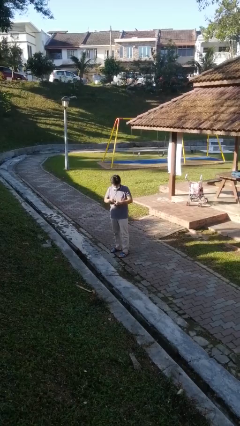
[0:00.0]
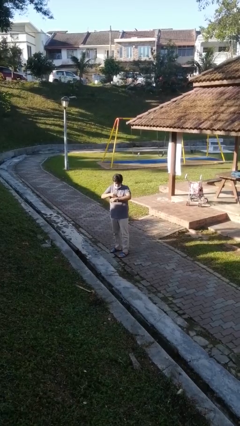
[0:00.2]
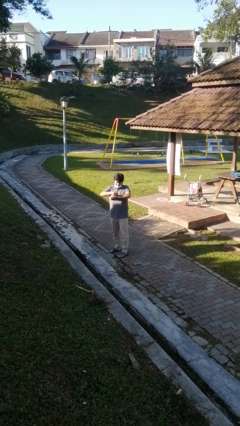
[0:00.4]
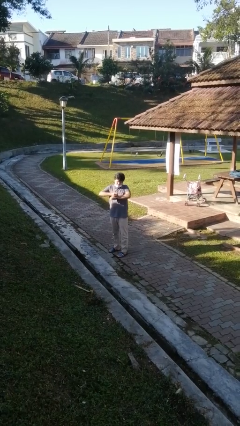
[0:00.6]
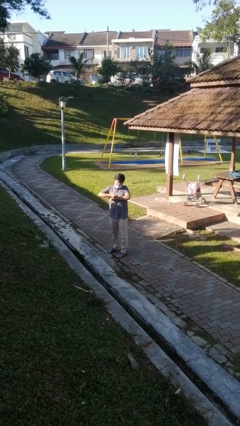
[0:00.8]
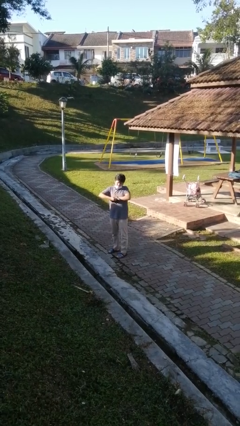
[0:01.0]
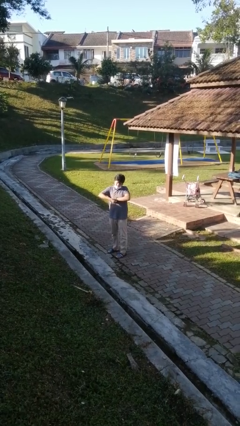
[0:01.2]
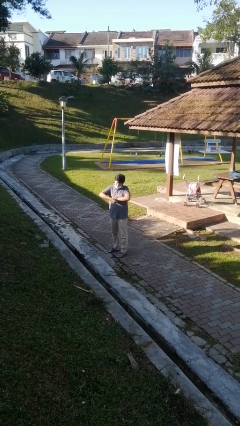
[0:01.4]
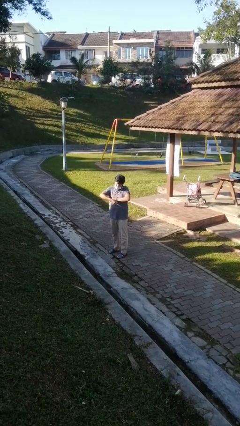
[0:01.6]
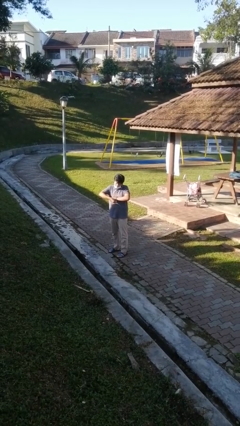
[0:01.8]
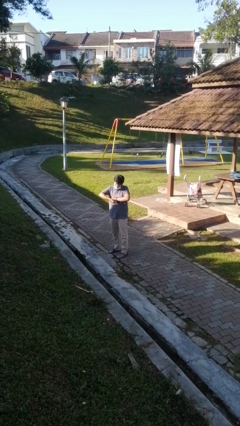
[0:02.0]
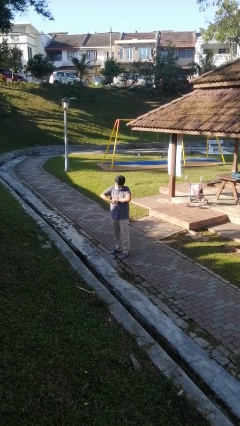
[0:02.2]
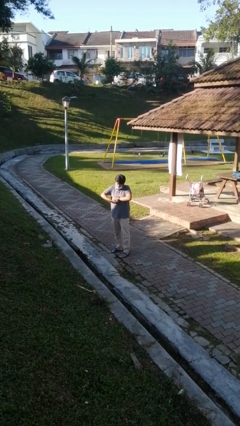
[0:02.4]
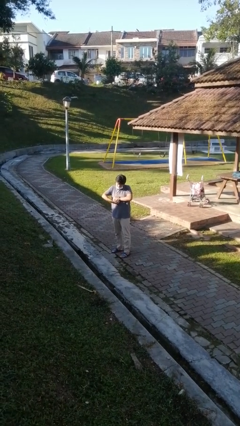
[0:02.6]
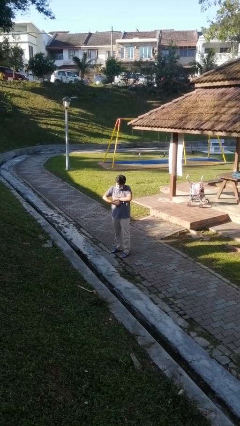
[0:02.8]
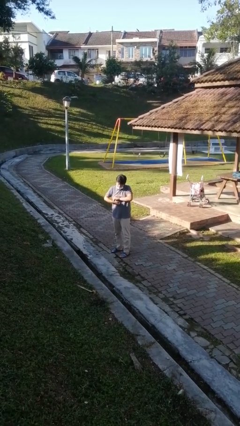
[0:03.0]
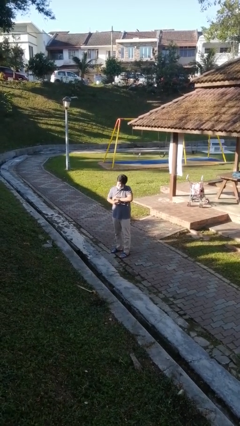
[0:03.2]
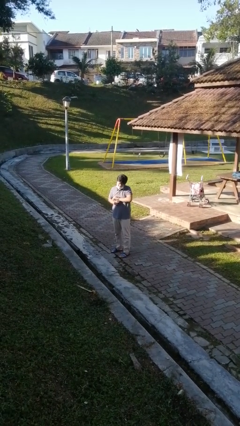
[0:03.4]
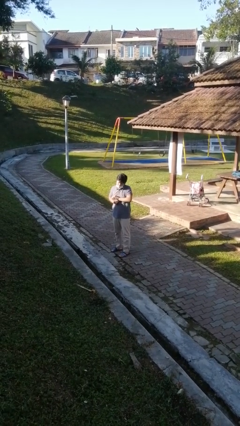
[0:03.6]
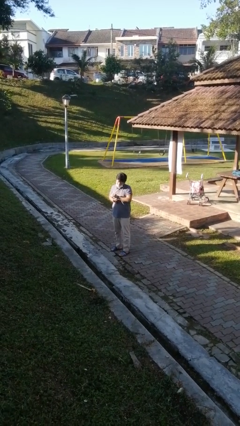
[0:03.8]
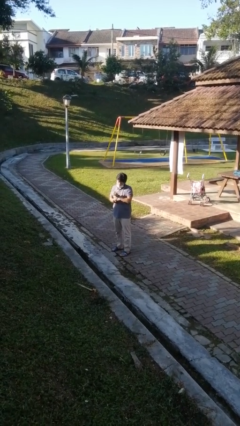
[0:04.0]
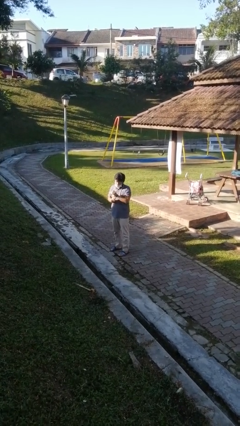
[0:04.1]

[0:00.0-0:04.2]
person puts on wristwatch

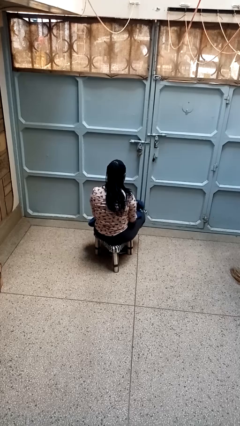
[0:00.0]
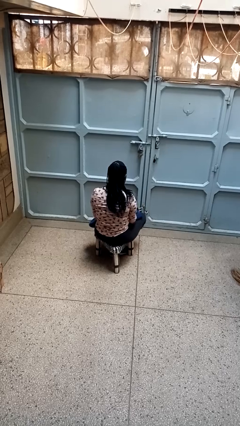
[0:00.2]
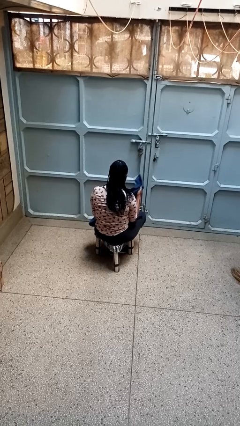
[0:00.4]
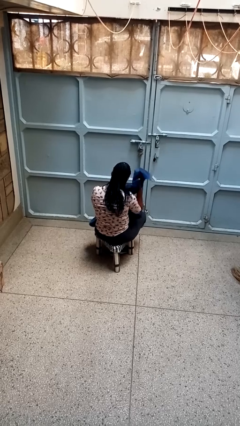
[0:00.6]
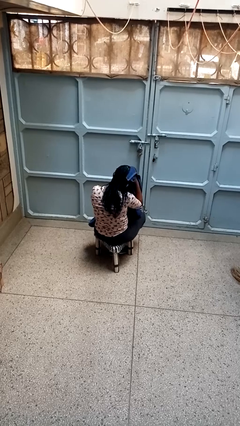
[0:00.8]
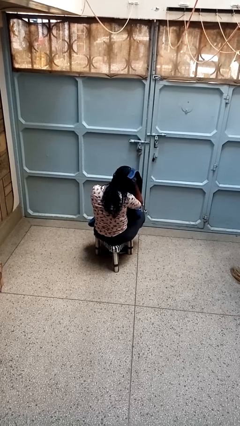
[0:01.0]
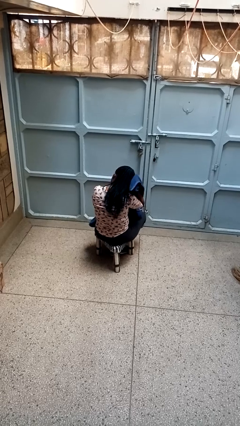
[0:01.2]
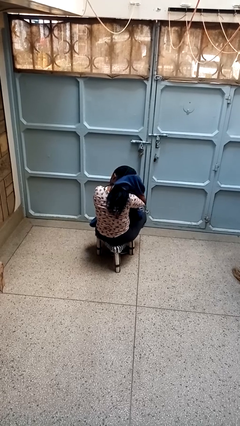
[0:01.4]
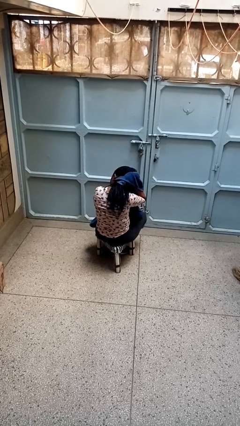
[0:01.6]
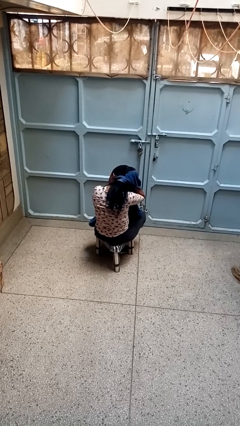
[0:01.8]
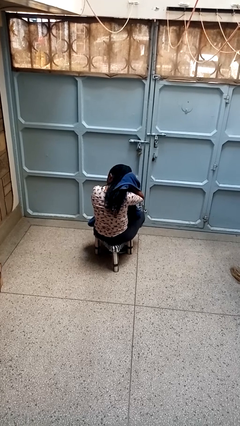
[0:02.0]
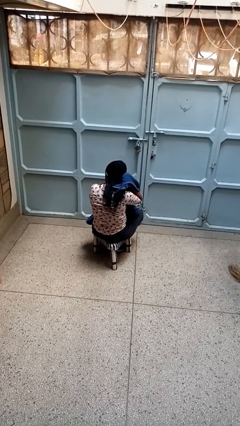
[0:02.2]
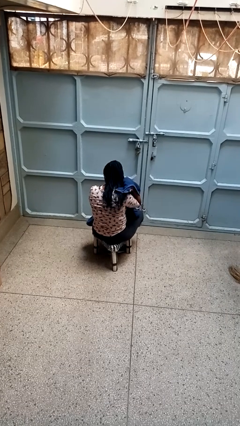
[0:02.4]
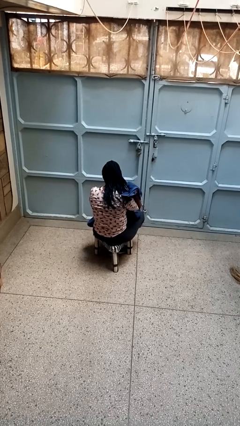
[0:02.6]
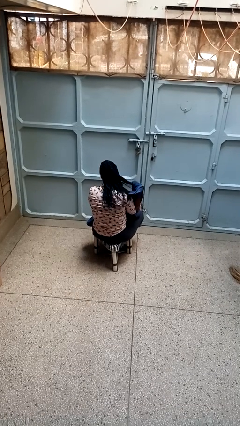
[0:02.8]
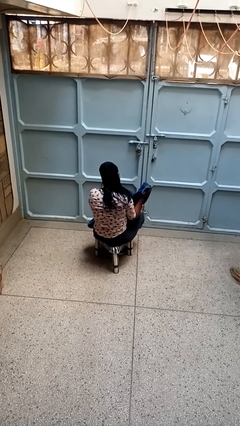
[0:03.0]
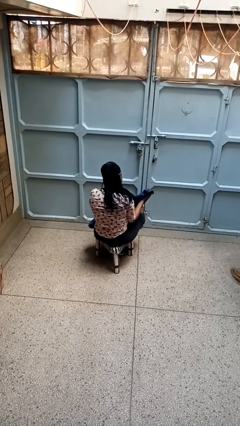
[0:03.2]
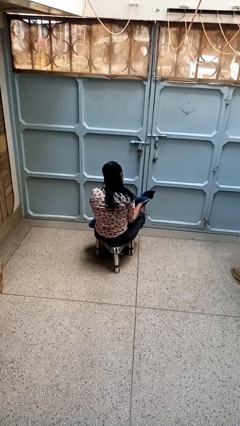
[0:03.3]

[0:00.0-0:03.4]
person dries hair with towel

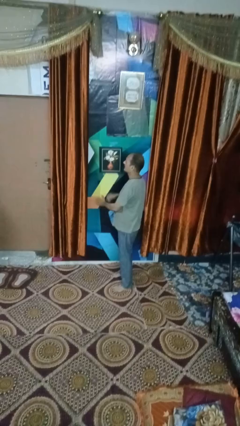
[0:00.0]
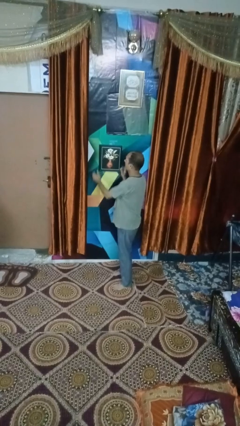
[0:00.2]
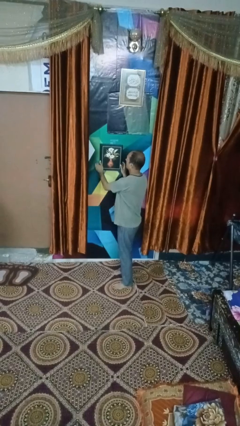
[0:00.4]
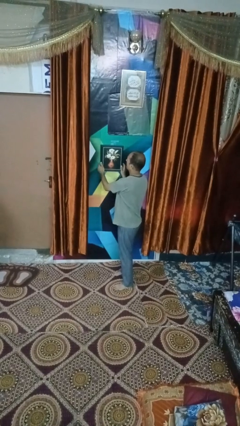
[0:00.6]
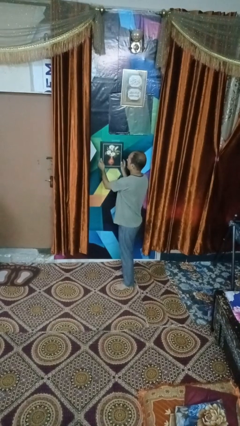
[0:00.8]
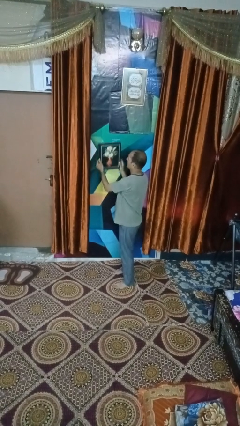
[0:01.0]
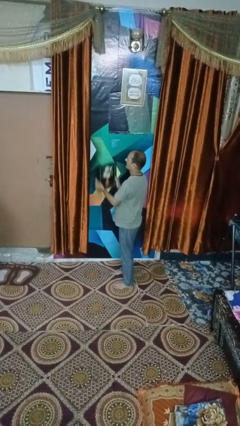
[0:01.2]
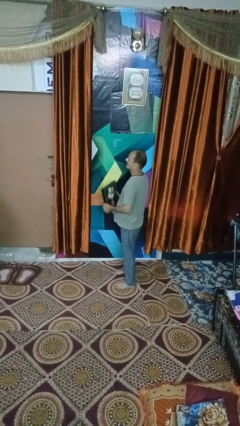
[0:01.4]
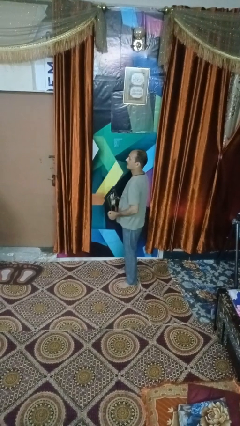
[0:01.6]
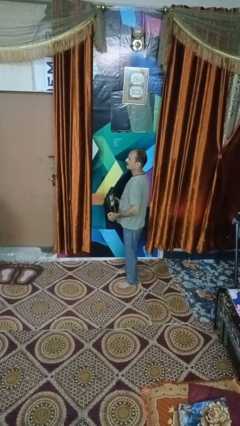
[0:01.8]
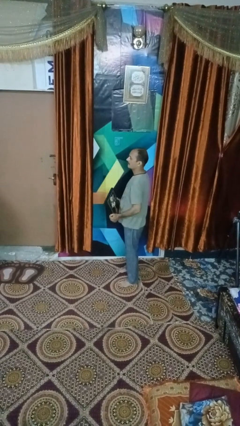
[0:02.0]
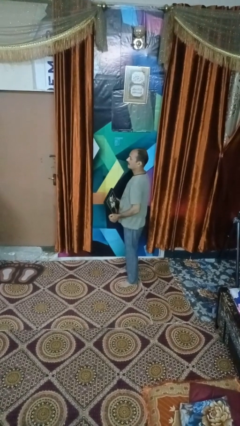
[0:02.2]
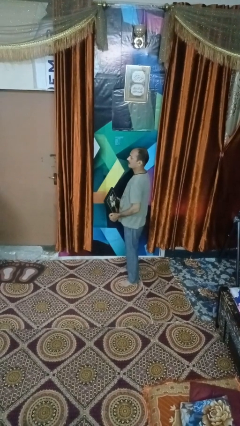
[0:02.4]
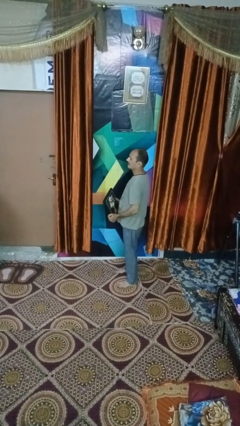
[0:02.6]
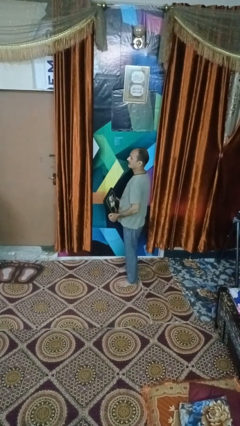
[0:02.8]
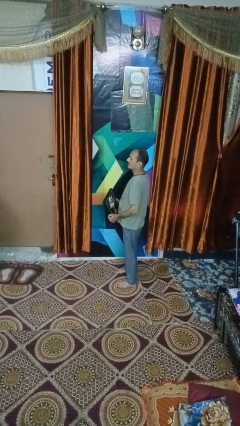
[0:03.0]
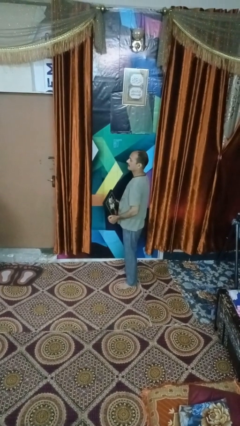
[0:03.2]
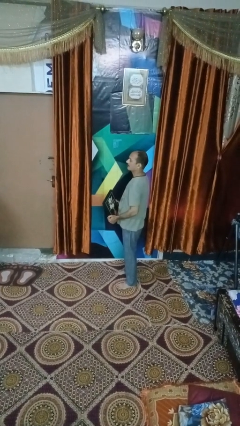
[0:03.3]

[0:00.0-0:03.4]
person takes down picture frame

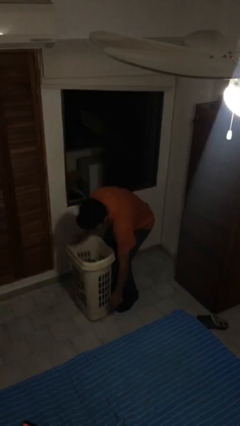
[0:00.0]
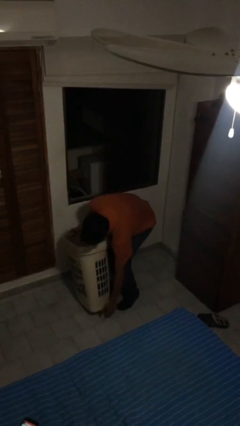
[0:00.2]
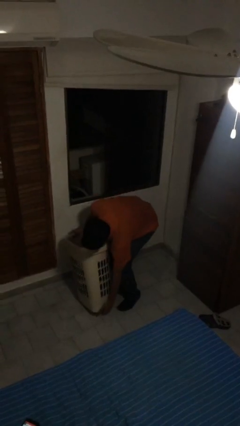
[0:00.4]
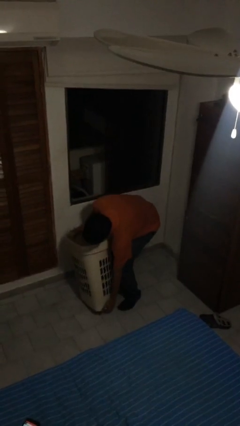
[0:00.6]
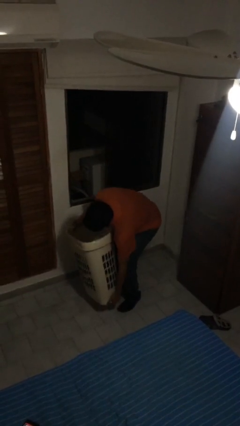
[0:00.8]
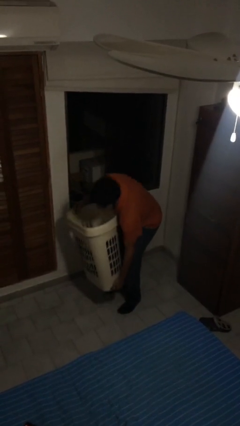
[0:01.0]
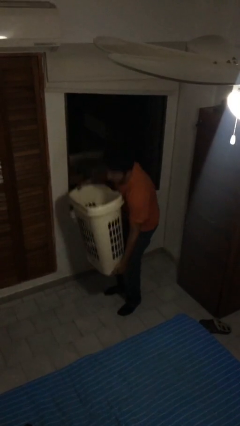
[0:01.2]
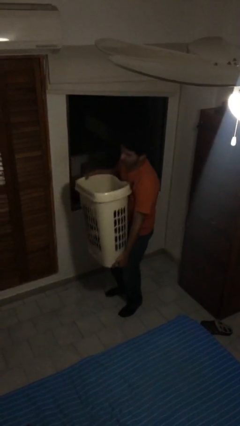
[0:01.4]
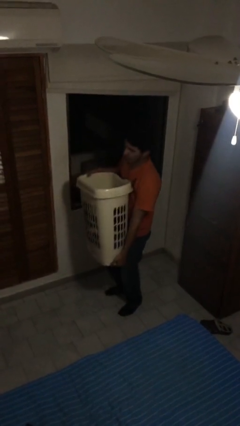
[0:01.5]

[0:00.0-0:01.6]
person picks up object from floor

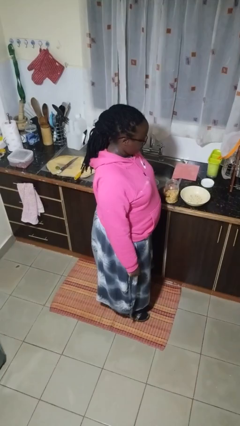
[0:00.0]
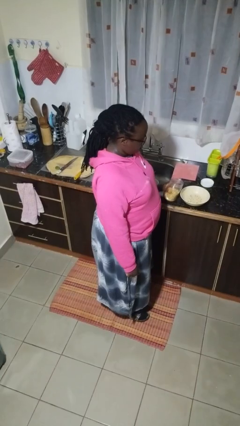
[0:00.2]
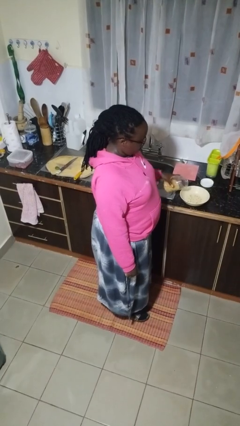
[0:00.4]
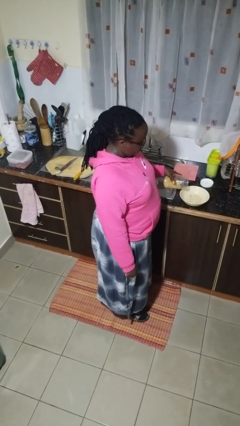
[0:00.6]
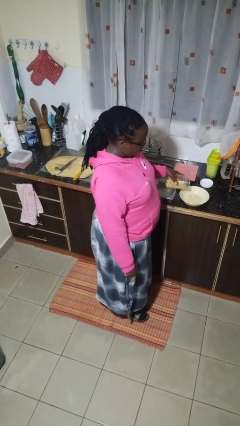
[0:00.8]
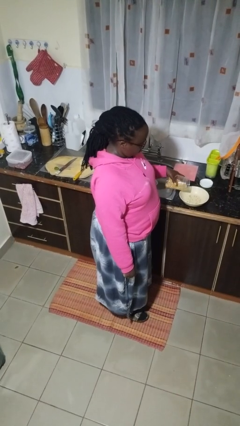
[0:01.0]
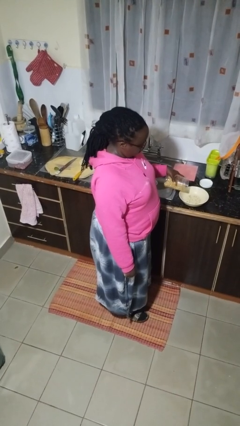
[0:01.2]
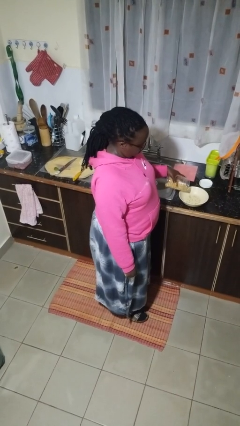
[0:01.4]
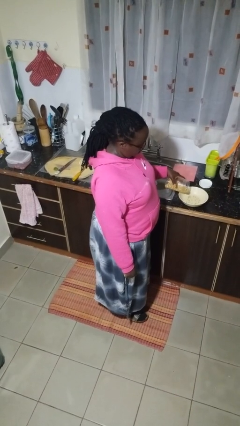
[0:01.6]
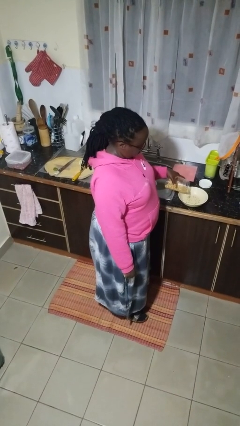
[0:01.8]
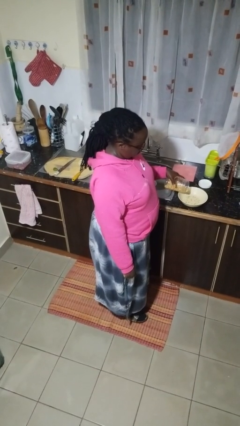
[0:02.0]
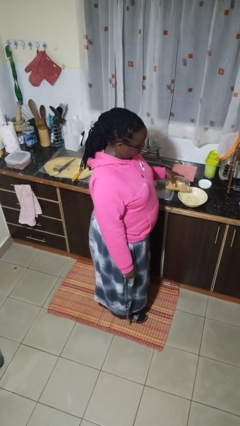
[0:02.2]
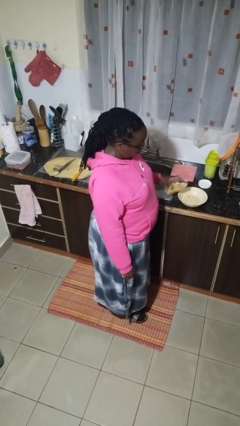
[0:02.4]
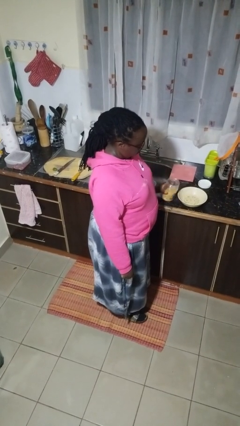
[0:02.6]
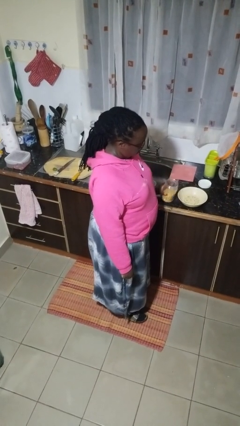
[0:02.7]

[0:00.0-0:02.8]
person pours into bowl

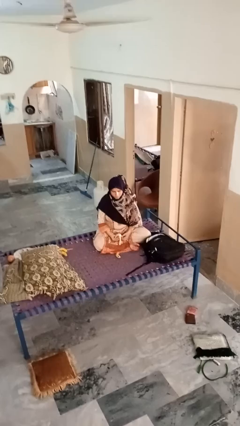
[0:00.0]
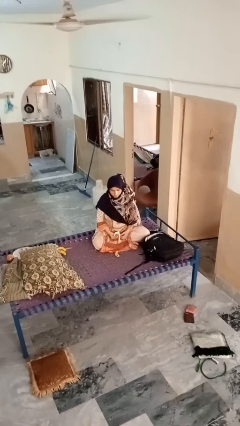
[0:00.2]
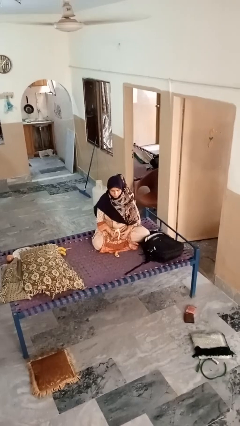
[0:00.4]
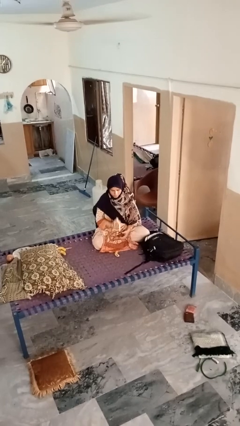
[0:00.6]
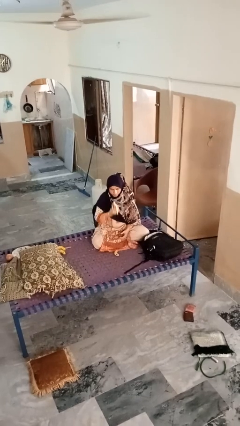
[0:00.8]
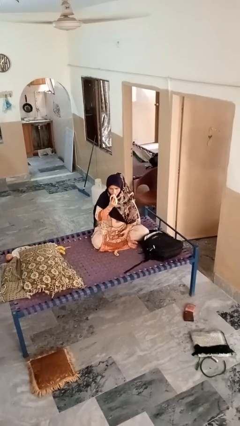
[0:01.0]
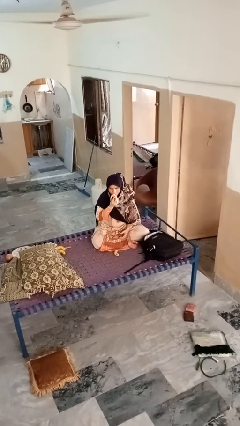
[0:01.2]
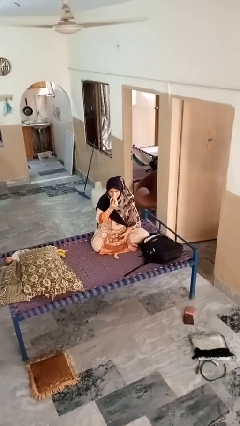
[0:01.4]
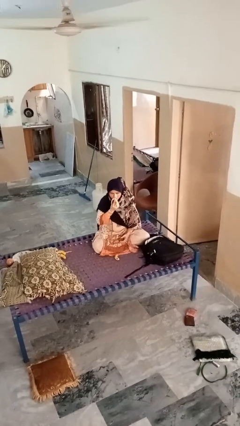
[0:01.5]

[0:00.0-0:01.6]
person eats banana

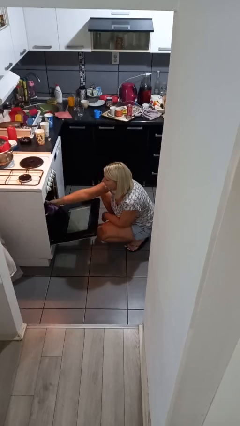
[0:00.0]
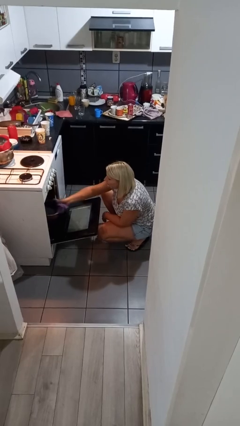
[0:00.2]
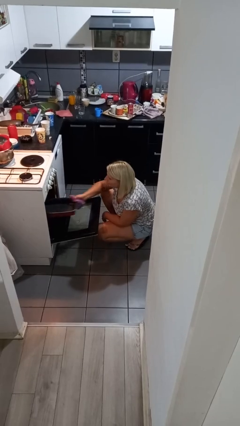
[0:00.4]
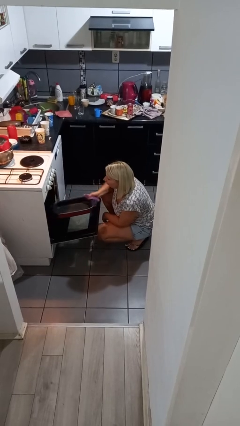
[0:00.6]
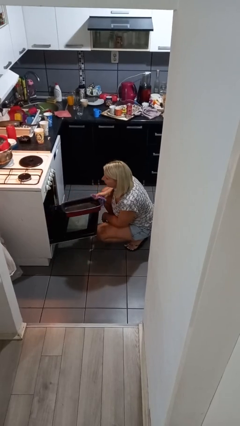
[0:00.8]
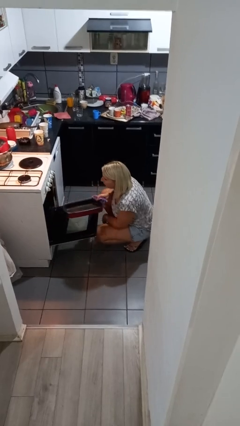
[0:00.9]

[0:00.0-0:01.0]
person takes object from oven
